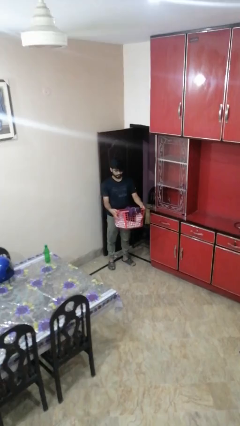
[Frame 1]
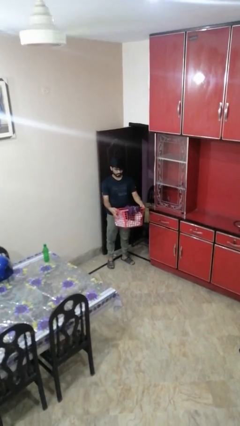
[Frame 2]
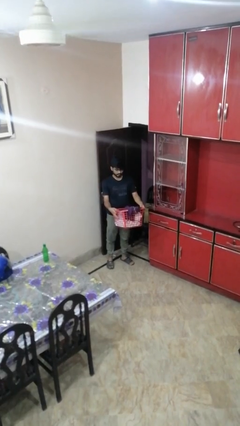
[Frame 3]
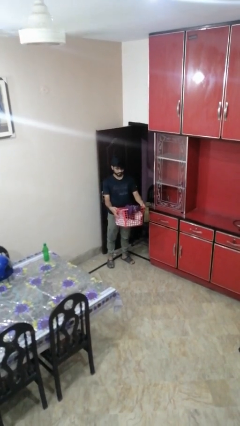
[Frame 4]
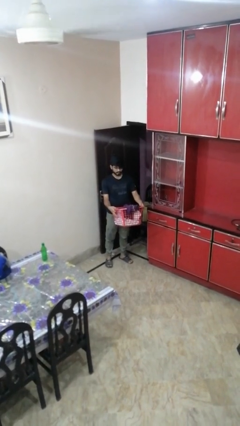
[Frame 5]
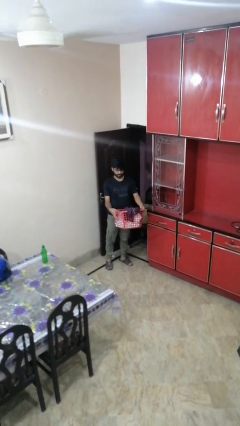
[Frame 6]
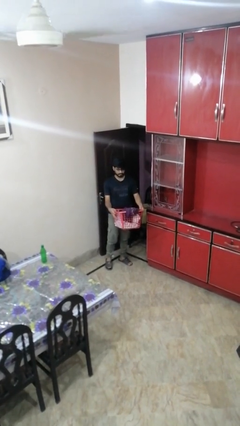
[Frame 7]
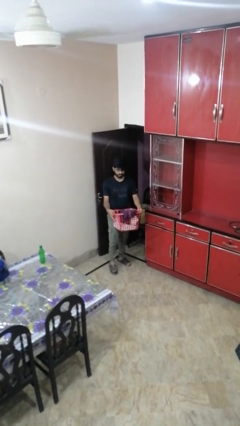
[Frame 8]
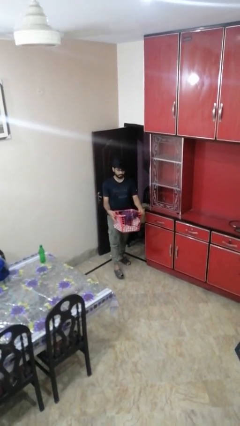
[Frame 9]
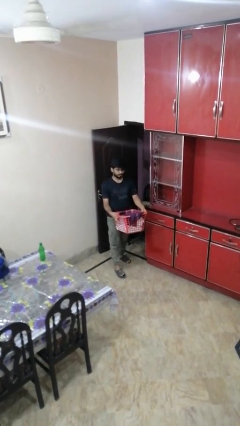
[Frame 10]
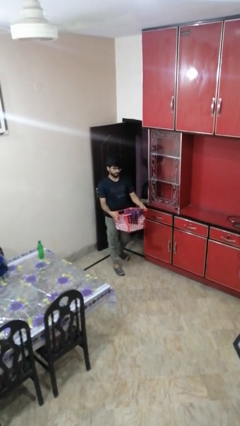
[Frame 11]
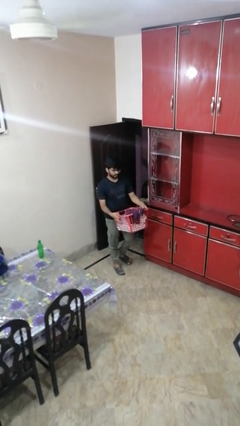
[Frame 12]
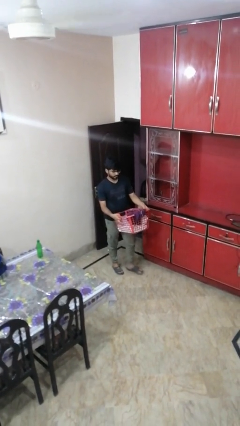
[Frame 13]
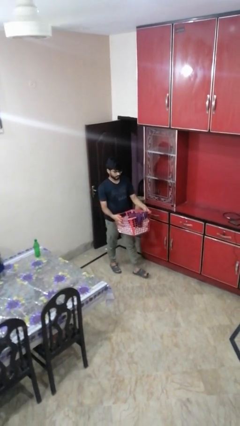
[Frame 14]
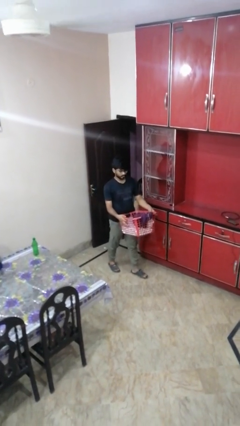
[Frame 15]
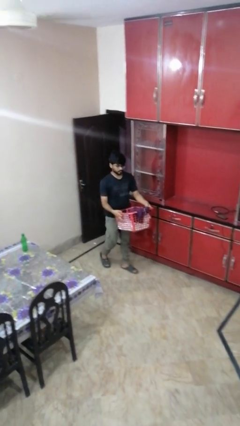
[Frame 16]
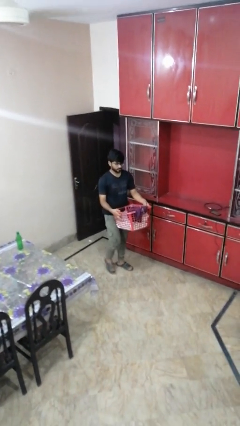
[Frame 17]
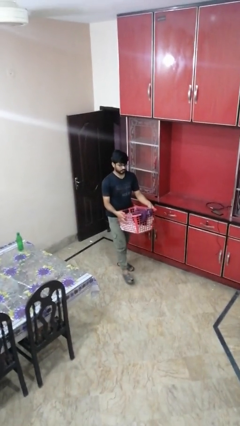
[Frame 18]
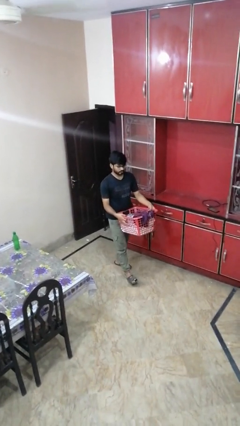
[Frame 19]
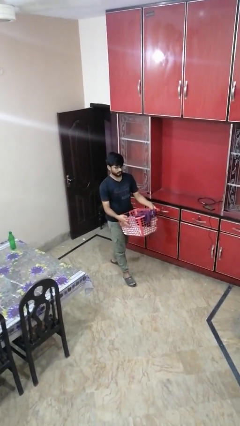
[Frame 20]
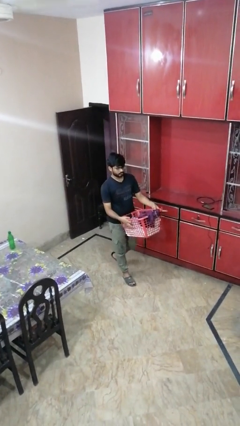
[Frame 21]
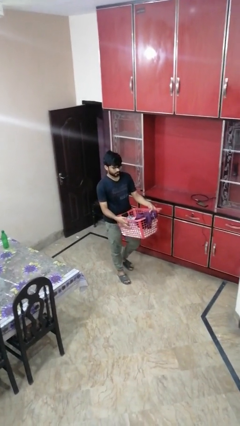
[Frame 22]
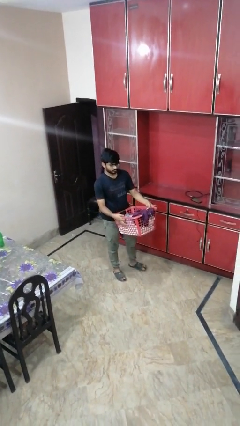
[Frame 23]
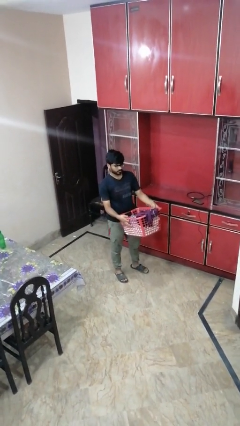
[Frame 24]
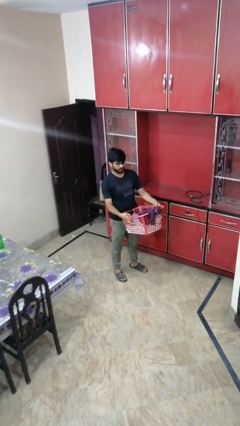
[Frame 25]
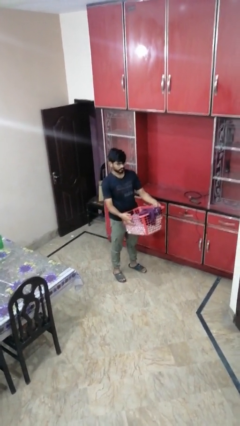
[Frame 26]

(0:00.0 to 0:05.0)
person carries laundry basket

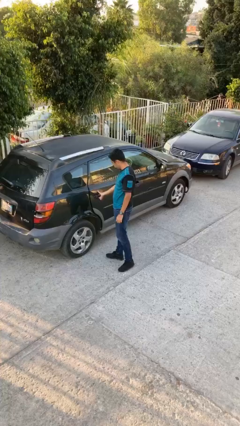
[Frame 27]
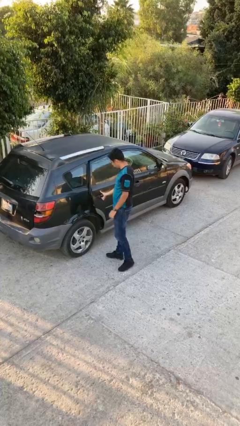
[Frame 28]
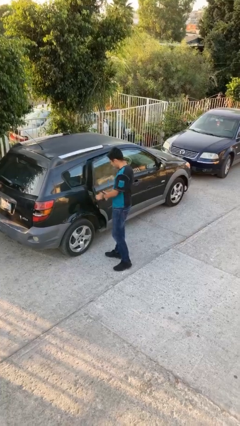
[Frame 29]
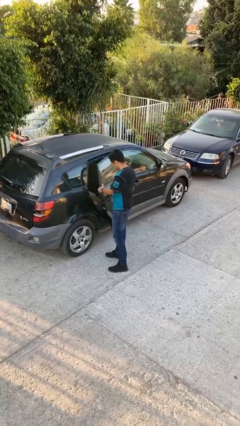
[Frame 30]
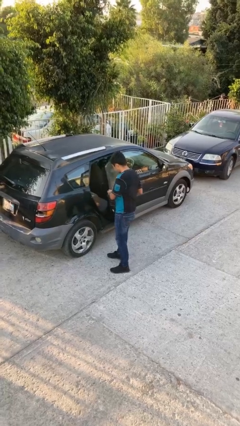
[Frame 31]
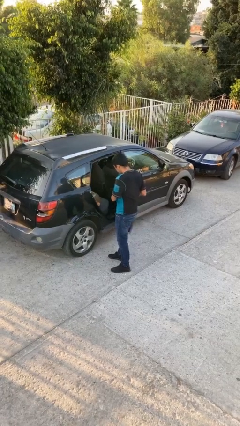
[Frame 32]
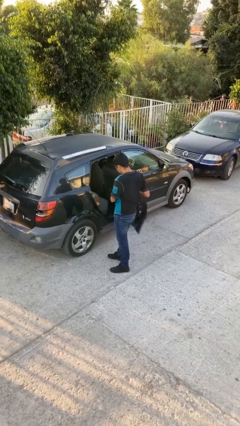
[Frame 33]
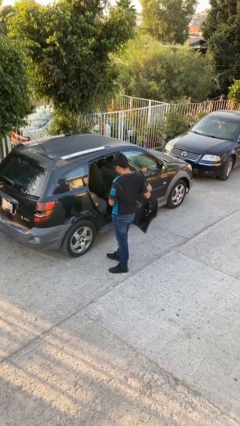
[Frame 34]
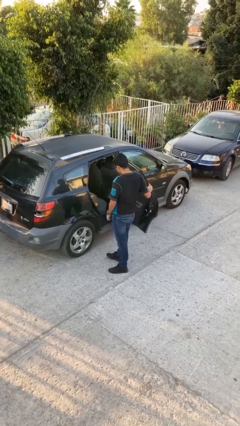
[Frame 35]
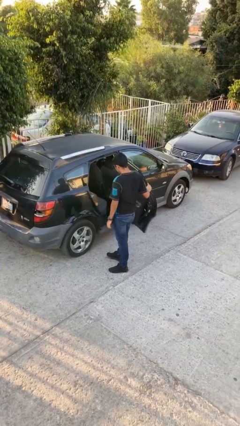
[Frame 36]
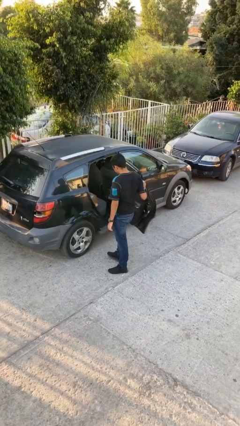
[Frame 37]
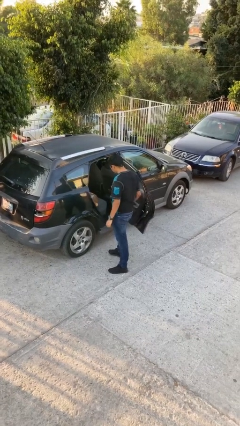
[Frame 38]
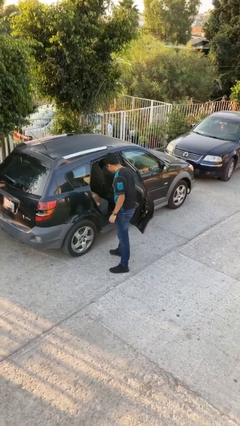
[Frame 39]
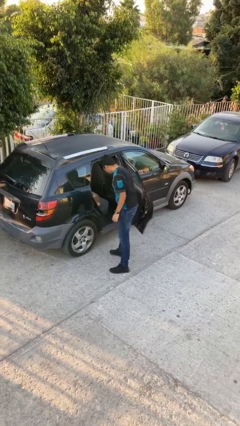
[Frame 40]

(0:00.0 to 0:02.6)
person opens car door

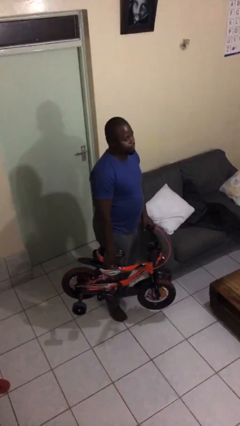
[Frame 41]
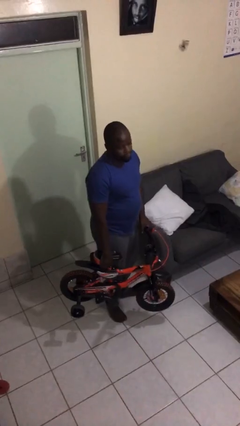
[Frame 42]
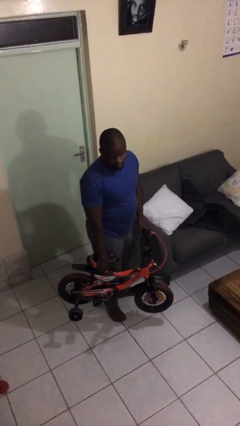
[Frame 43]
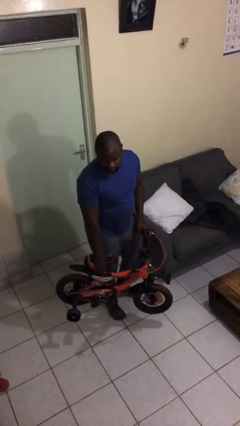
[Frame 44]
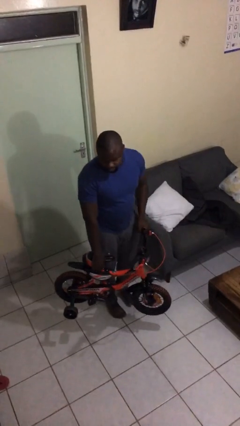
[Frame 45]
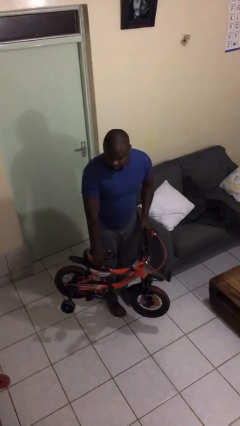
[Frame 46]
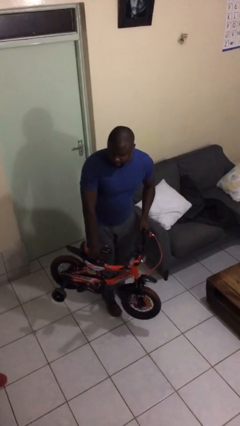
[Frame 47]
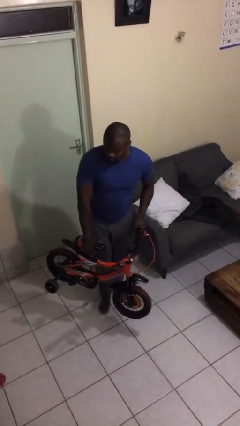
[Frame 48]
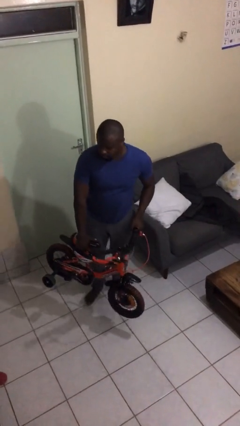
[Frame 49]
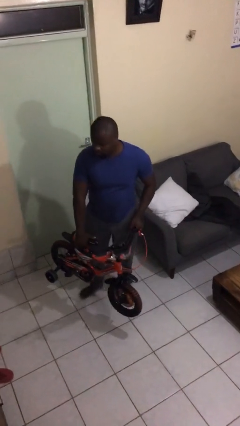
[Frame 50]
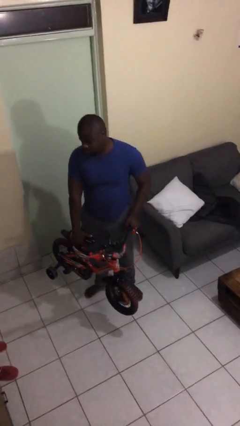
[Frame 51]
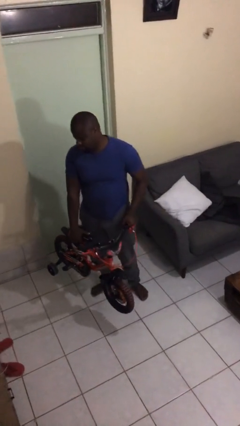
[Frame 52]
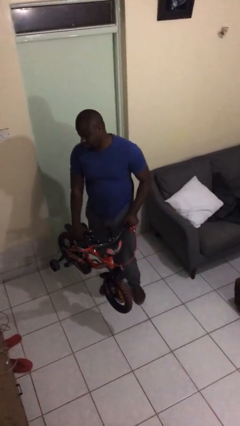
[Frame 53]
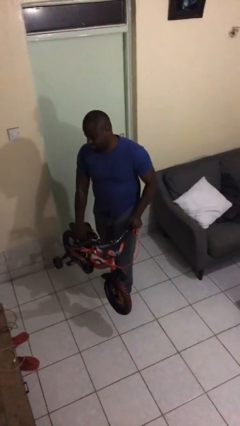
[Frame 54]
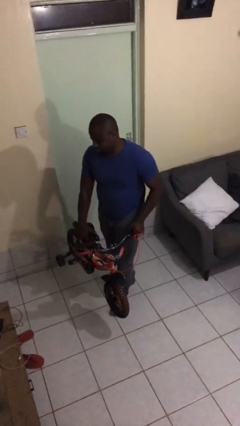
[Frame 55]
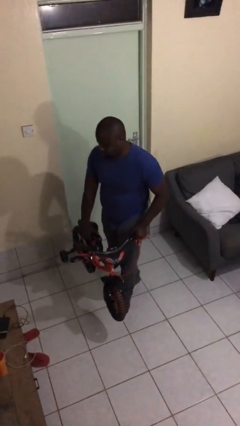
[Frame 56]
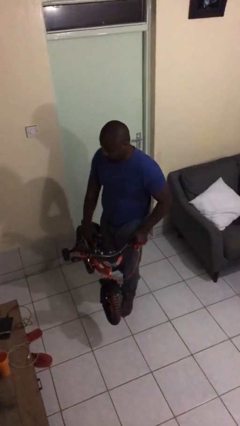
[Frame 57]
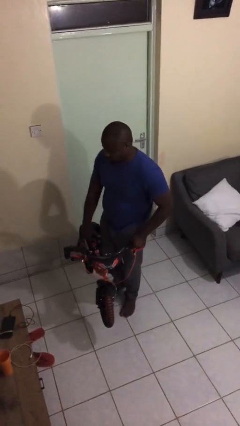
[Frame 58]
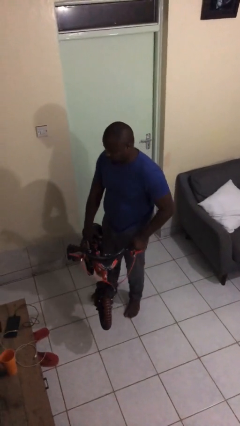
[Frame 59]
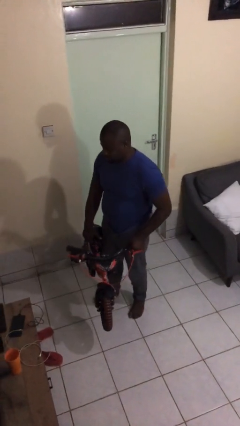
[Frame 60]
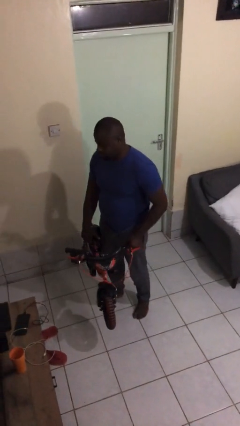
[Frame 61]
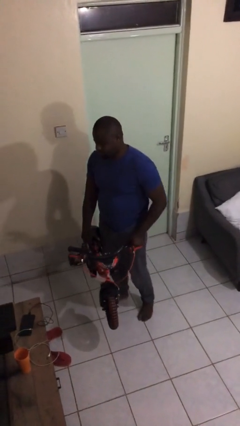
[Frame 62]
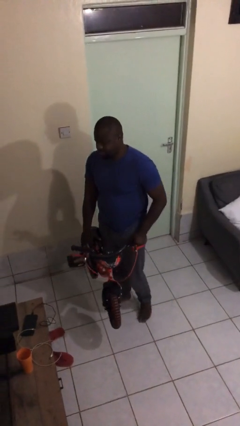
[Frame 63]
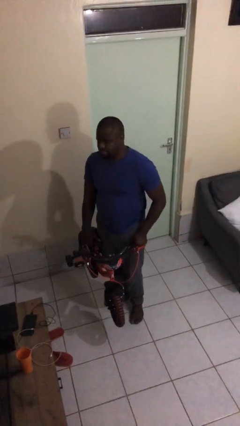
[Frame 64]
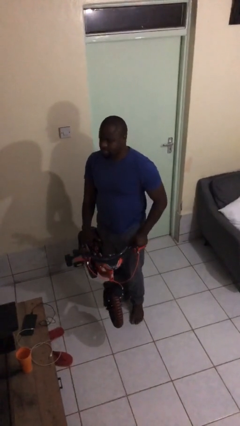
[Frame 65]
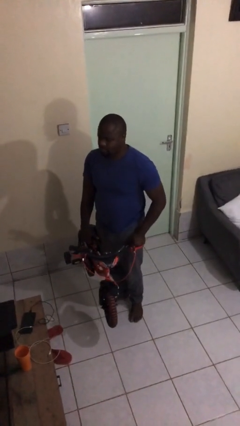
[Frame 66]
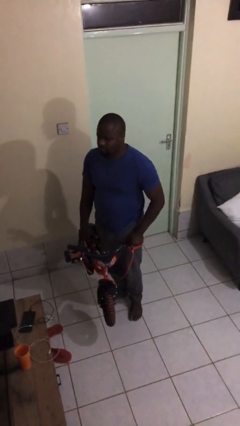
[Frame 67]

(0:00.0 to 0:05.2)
person carries bicycle

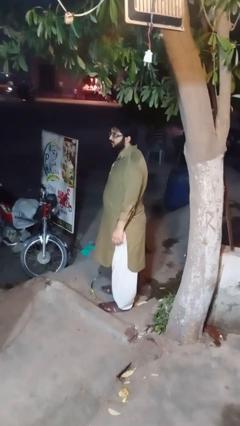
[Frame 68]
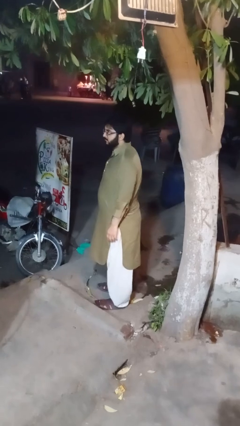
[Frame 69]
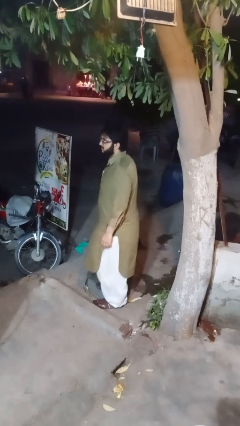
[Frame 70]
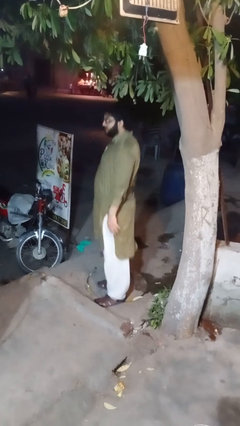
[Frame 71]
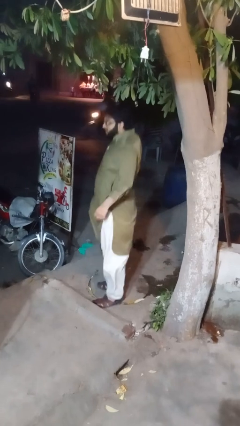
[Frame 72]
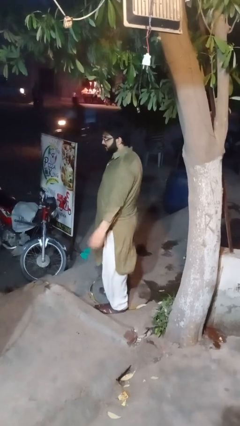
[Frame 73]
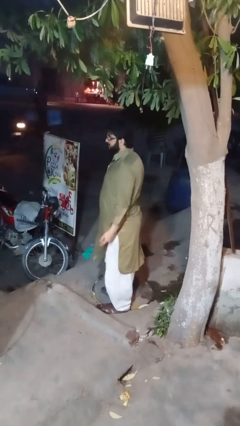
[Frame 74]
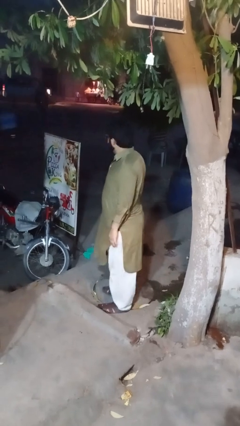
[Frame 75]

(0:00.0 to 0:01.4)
person jumps

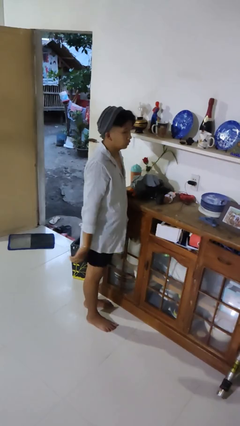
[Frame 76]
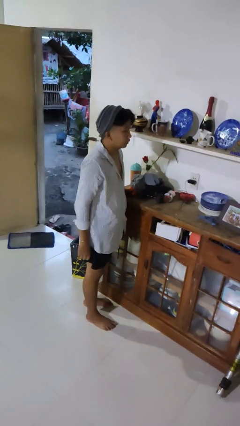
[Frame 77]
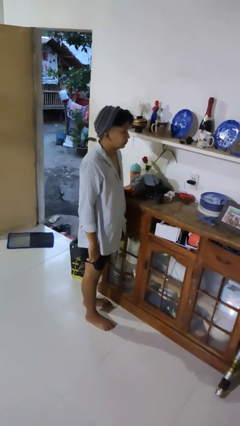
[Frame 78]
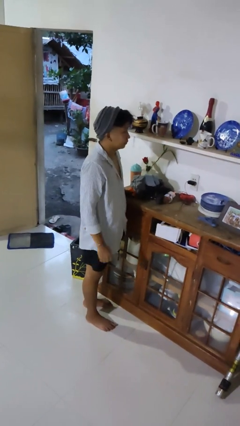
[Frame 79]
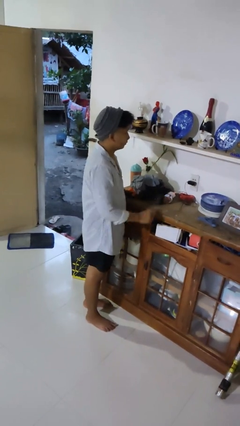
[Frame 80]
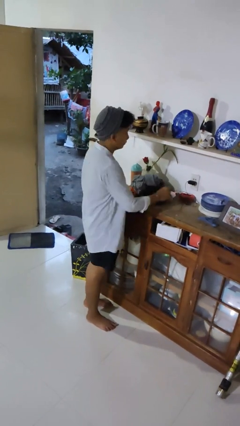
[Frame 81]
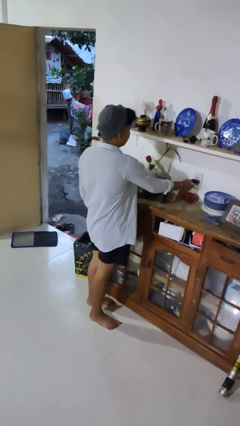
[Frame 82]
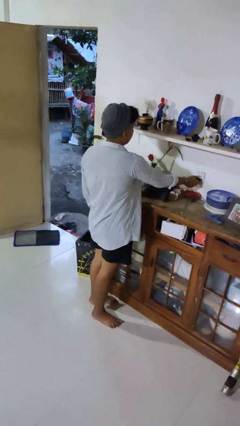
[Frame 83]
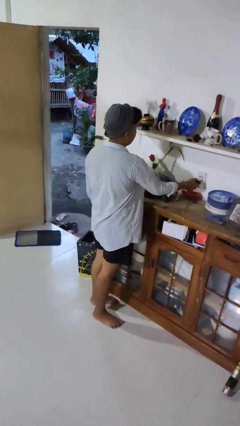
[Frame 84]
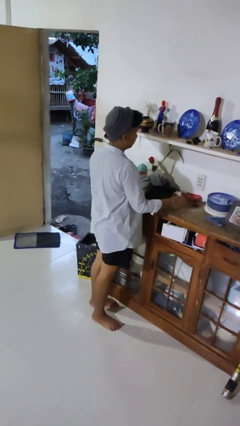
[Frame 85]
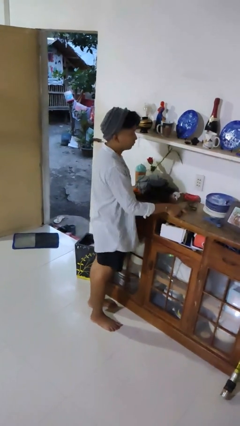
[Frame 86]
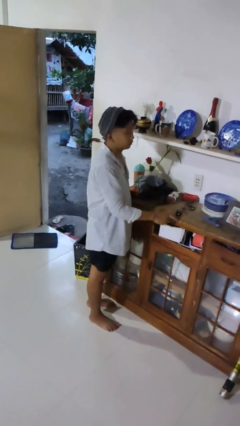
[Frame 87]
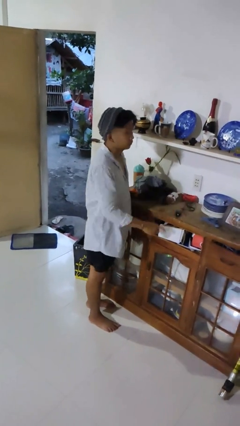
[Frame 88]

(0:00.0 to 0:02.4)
person unplugs from electrical socket

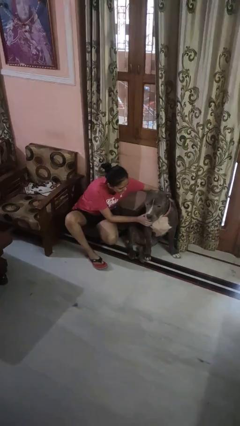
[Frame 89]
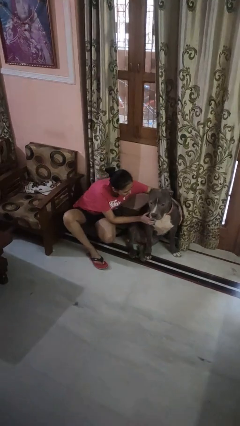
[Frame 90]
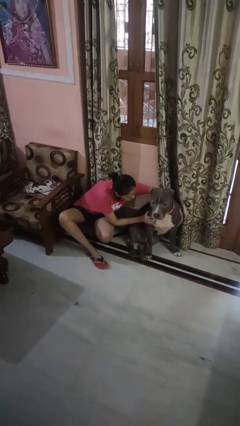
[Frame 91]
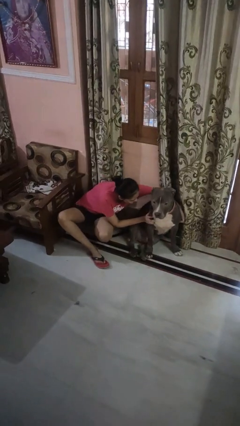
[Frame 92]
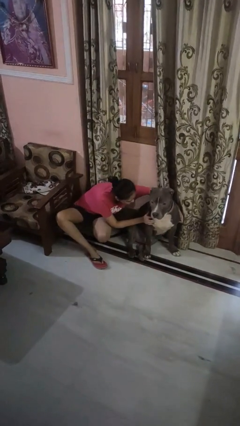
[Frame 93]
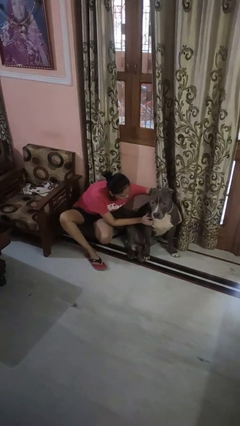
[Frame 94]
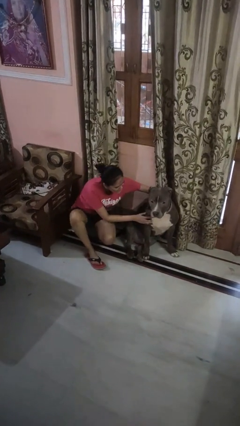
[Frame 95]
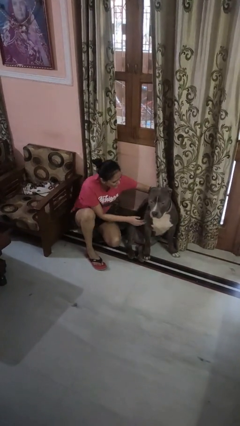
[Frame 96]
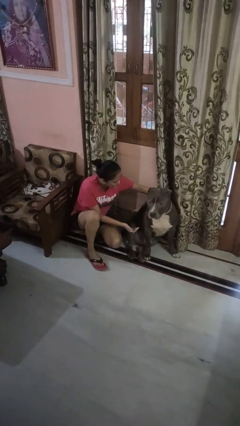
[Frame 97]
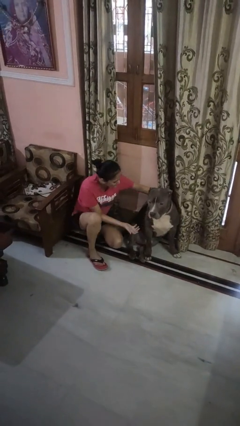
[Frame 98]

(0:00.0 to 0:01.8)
person hugs dog
